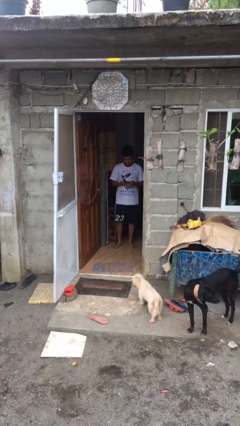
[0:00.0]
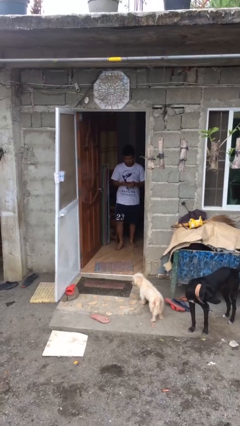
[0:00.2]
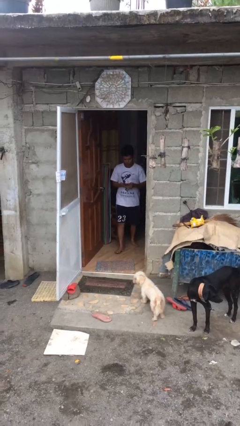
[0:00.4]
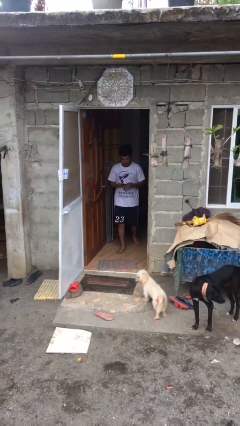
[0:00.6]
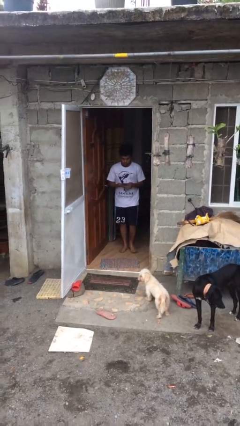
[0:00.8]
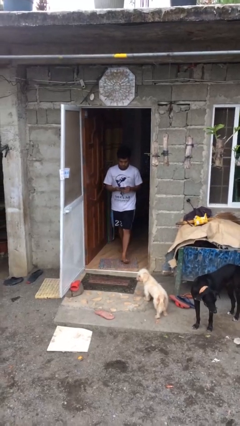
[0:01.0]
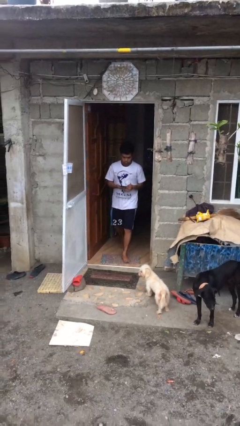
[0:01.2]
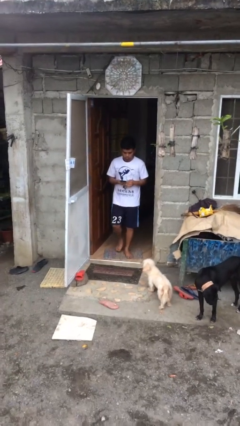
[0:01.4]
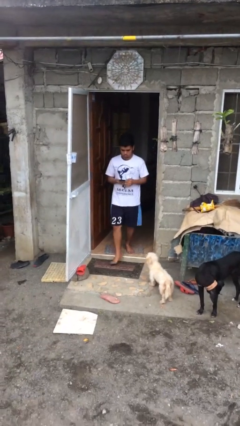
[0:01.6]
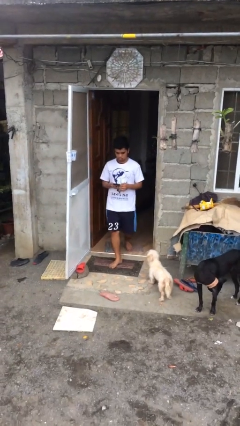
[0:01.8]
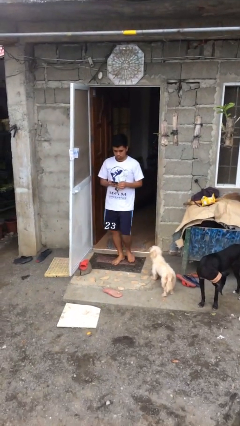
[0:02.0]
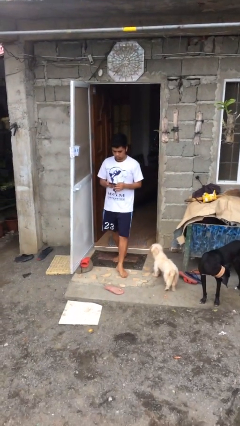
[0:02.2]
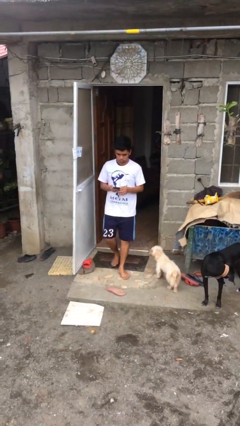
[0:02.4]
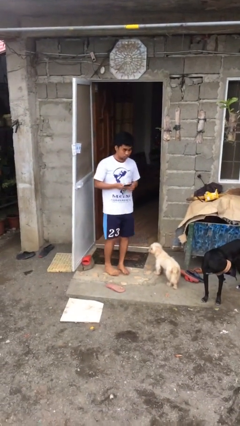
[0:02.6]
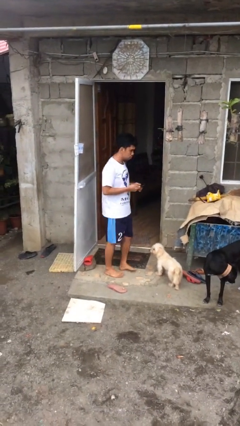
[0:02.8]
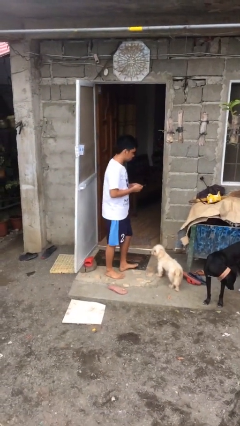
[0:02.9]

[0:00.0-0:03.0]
person enters scene through structure

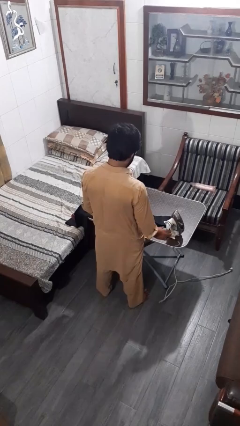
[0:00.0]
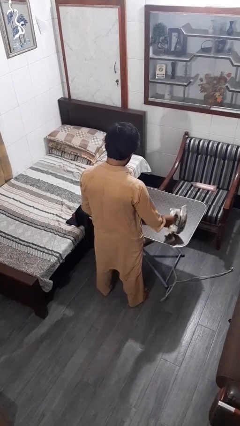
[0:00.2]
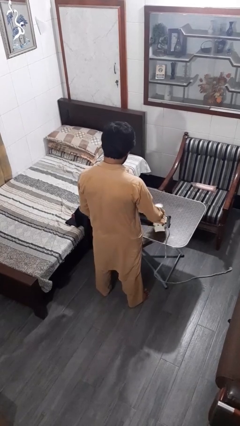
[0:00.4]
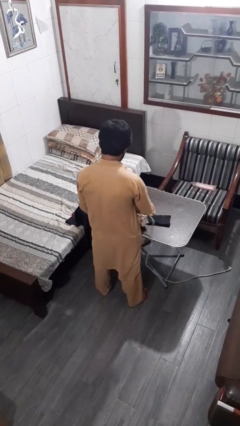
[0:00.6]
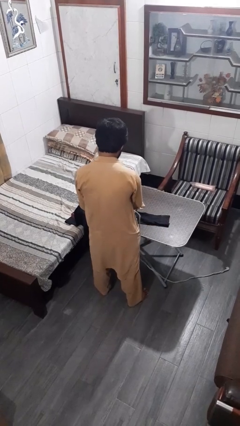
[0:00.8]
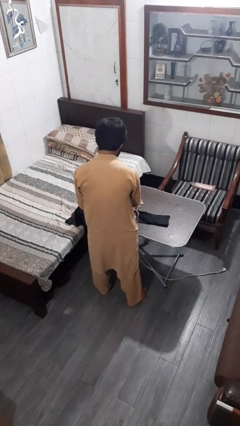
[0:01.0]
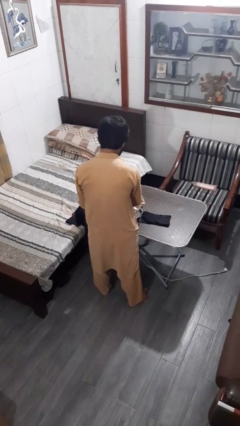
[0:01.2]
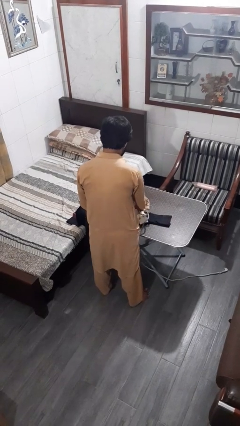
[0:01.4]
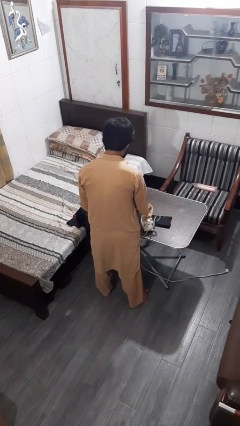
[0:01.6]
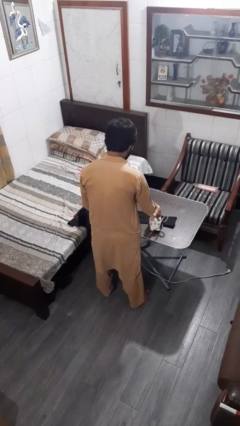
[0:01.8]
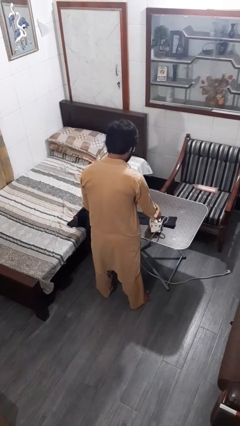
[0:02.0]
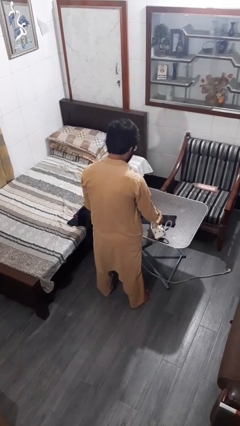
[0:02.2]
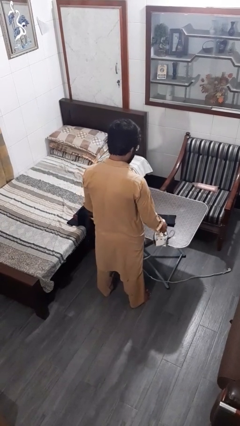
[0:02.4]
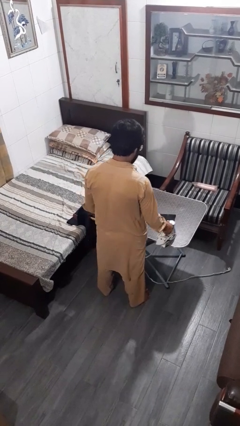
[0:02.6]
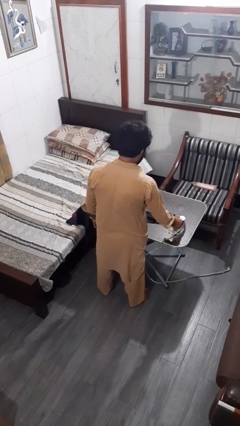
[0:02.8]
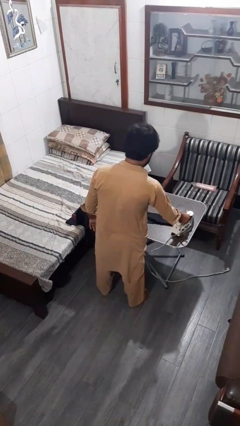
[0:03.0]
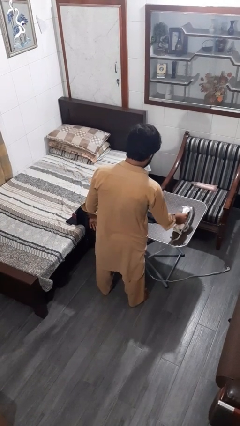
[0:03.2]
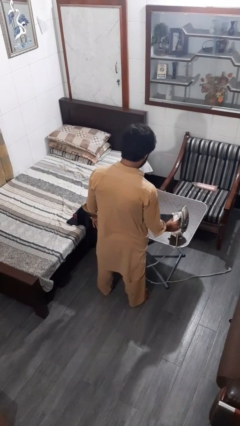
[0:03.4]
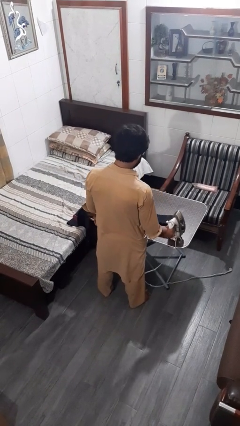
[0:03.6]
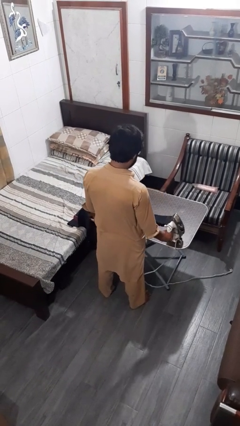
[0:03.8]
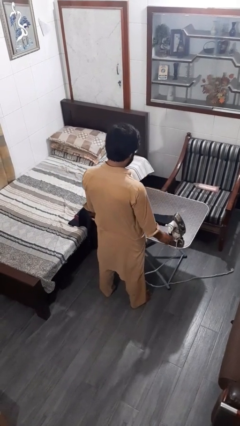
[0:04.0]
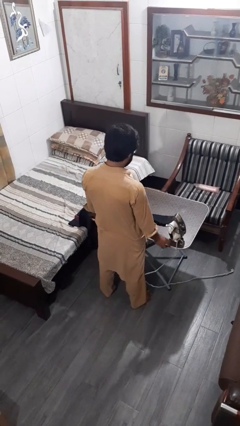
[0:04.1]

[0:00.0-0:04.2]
person irons clothes

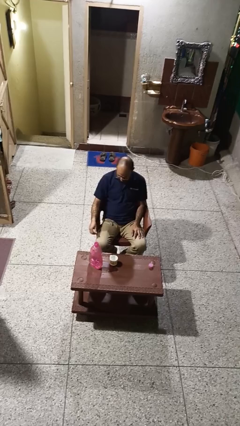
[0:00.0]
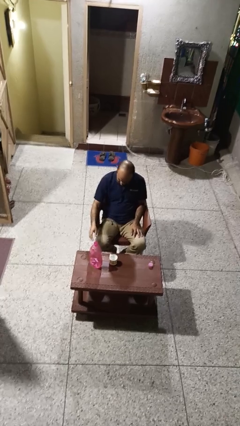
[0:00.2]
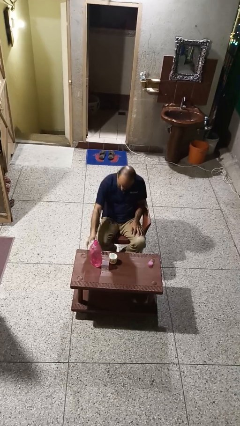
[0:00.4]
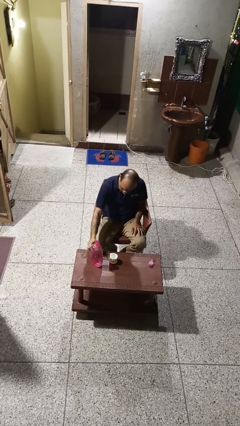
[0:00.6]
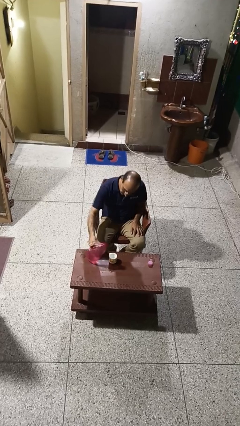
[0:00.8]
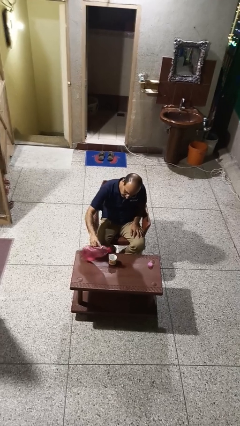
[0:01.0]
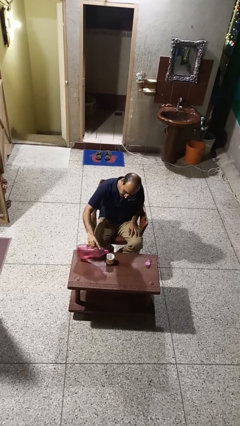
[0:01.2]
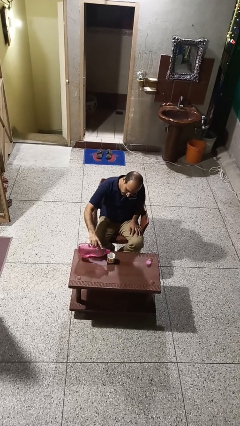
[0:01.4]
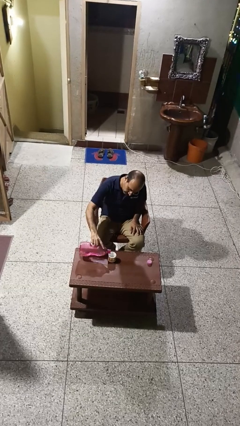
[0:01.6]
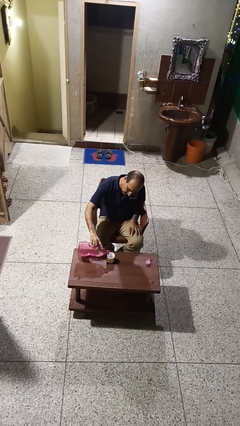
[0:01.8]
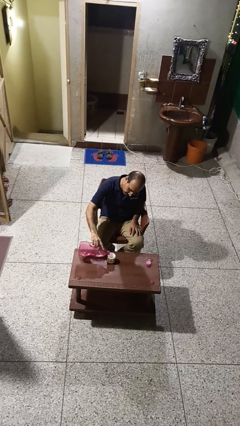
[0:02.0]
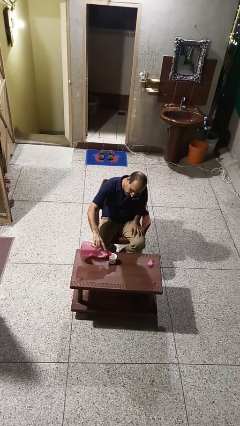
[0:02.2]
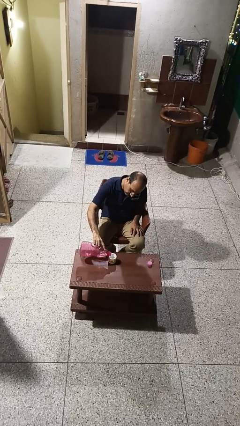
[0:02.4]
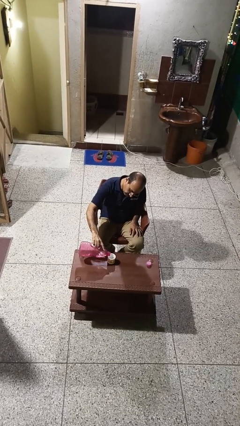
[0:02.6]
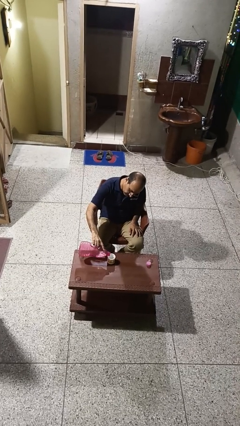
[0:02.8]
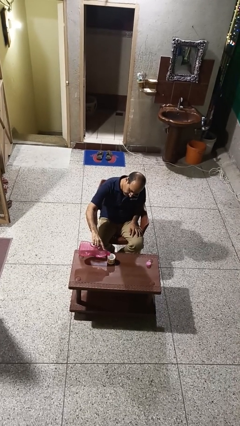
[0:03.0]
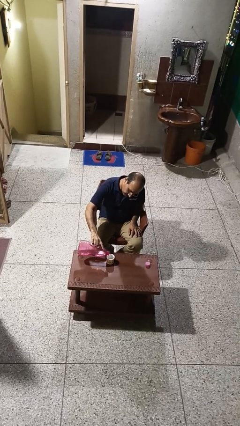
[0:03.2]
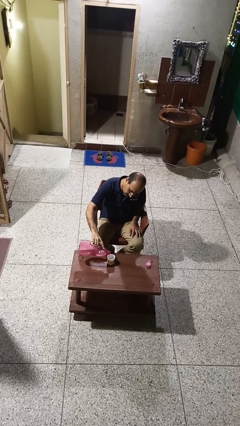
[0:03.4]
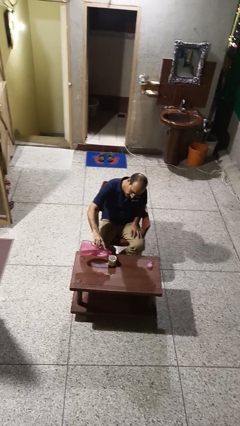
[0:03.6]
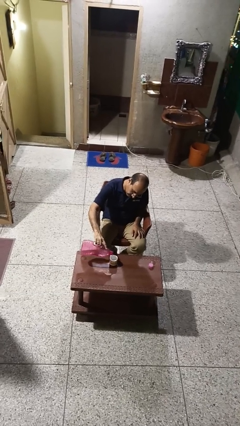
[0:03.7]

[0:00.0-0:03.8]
person pours liquid into cup

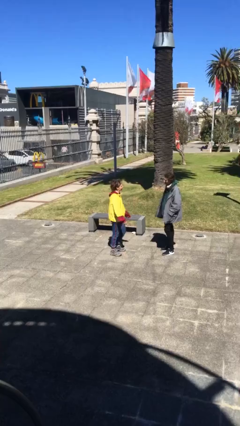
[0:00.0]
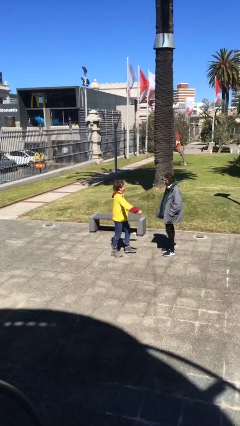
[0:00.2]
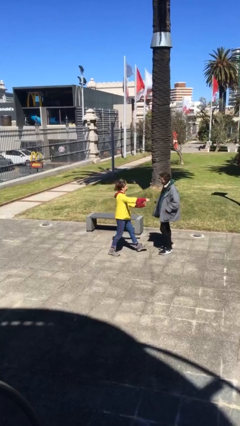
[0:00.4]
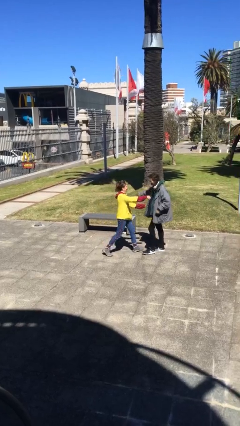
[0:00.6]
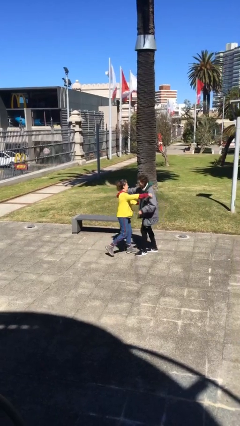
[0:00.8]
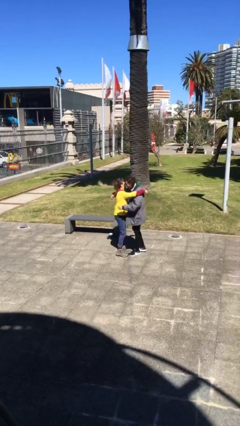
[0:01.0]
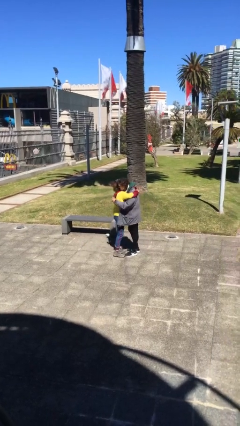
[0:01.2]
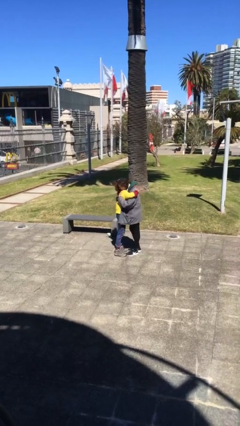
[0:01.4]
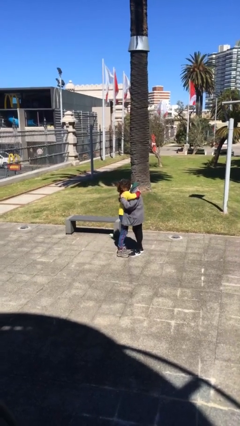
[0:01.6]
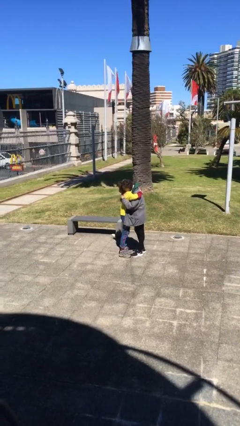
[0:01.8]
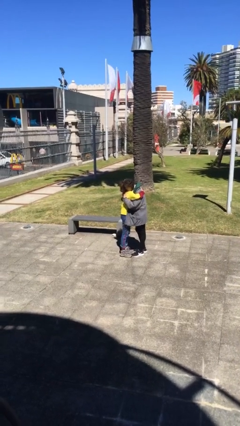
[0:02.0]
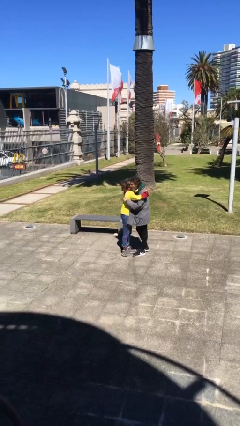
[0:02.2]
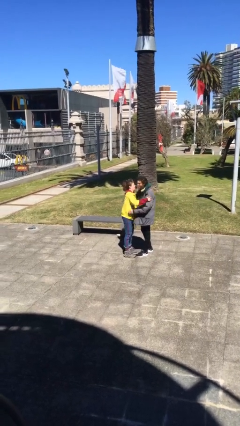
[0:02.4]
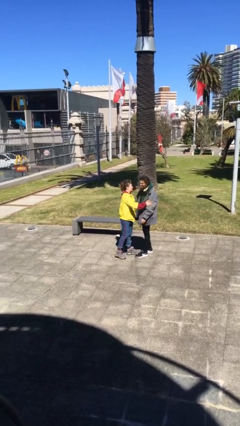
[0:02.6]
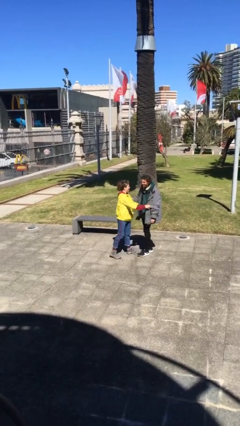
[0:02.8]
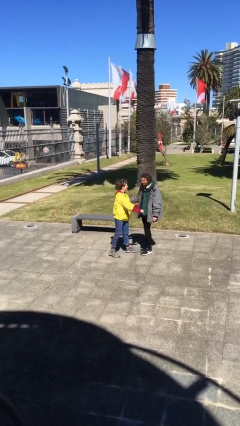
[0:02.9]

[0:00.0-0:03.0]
person embraces person

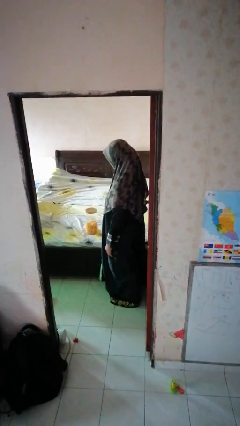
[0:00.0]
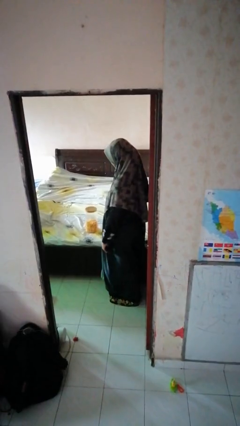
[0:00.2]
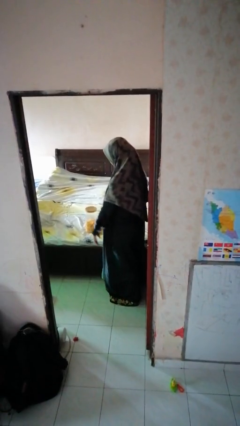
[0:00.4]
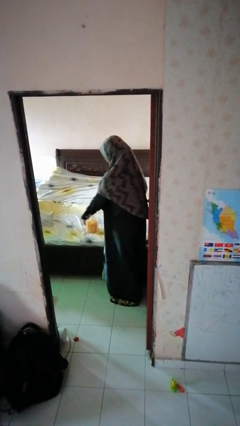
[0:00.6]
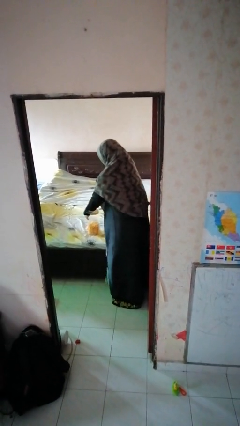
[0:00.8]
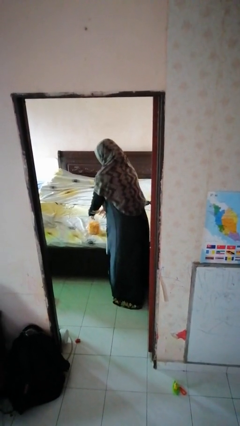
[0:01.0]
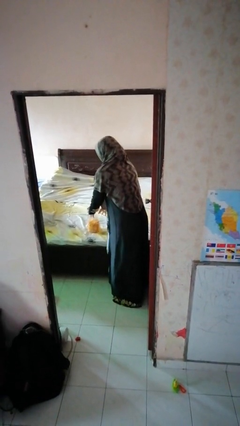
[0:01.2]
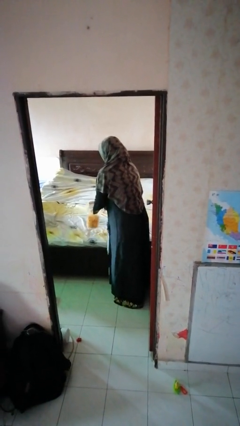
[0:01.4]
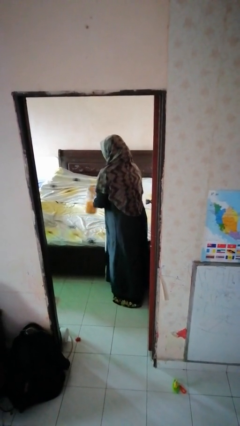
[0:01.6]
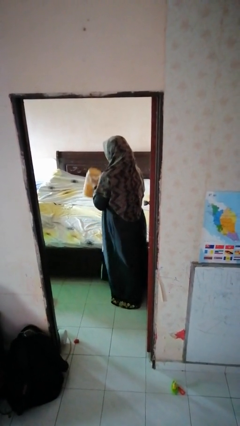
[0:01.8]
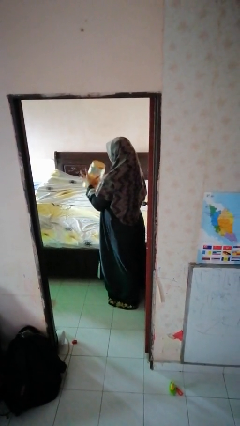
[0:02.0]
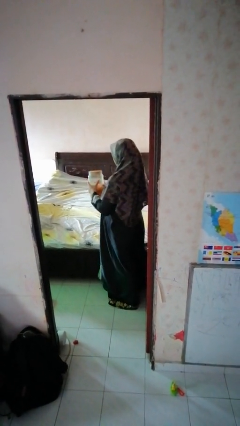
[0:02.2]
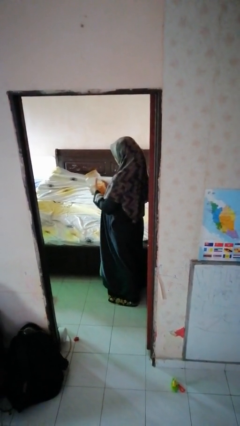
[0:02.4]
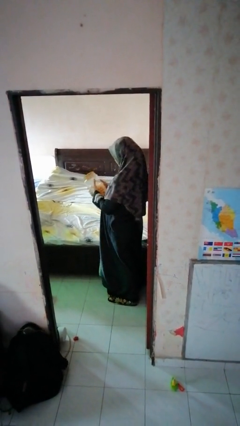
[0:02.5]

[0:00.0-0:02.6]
person picks up object from bed

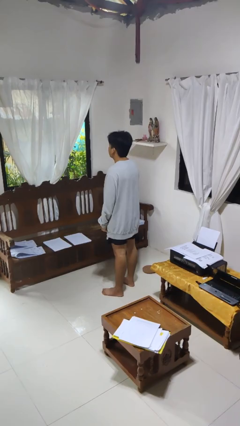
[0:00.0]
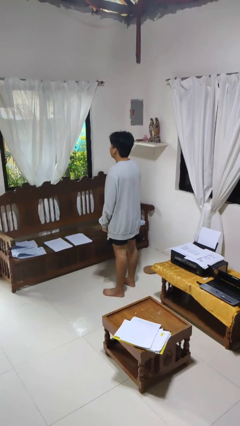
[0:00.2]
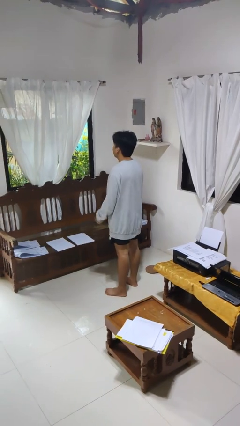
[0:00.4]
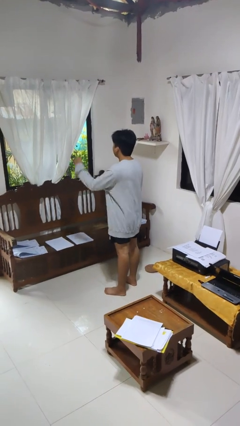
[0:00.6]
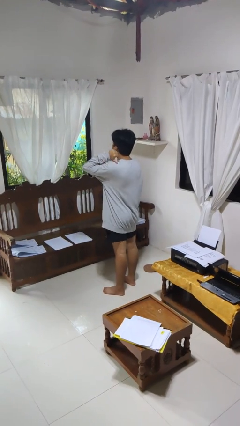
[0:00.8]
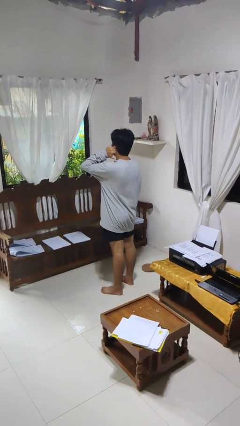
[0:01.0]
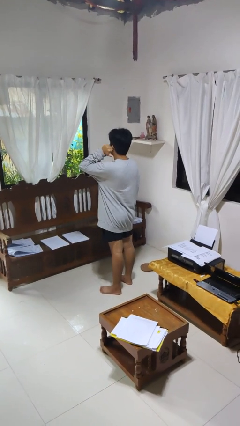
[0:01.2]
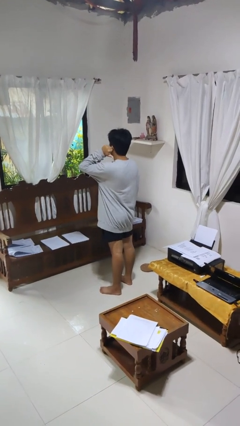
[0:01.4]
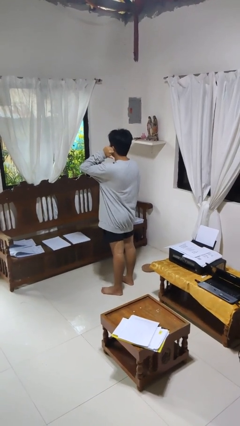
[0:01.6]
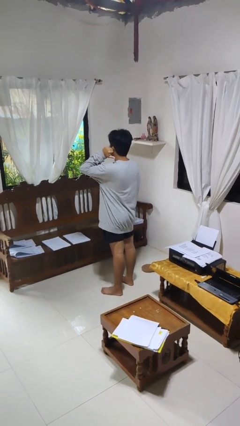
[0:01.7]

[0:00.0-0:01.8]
person gestures behind me
